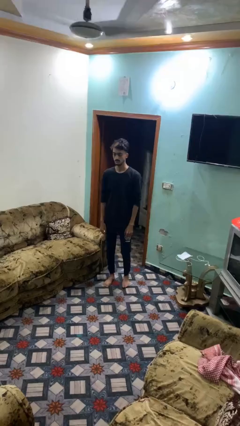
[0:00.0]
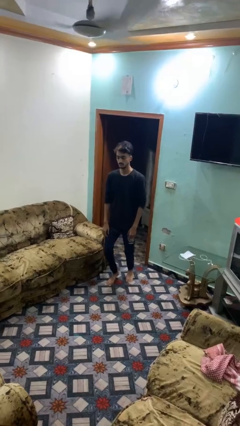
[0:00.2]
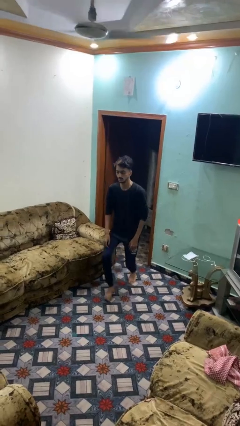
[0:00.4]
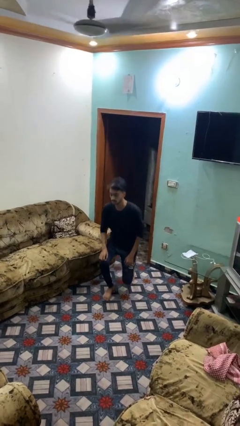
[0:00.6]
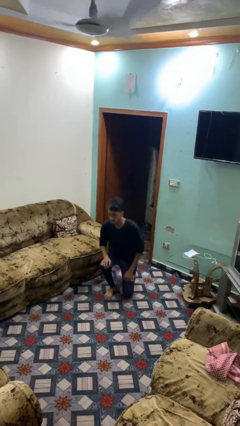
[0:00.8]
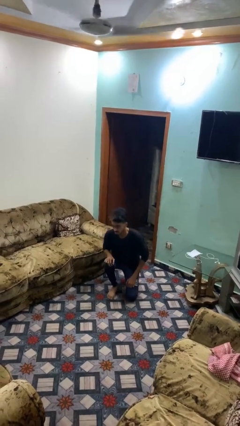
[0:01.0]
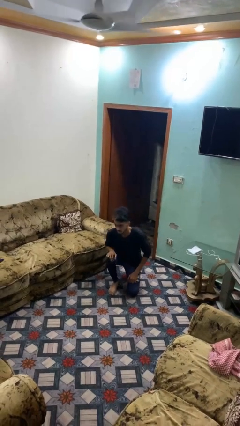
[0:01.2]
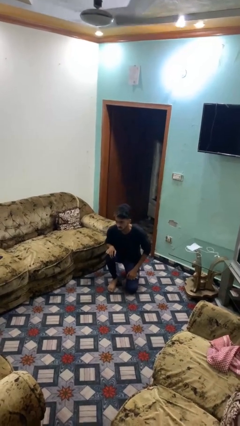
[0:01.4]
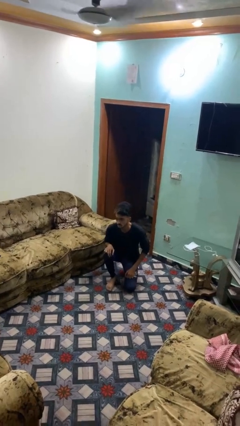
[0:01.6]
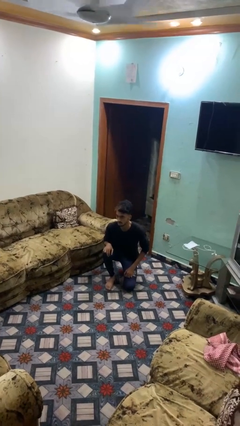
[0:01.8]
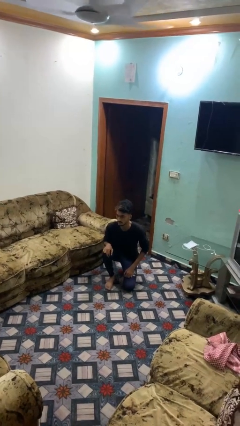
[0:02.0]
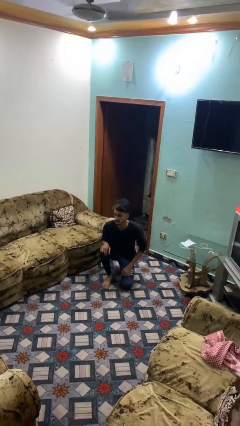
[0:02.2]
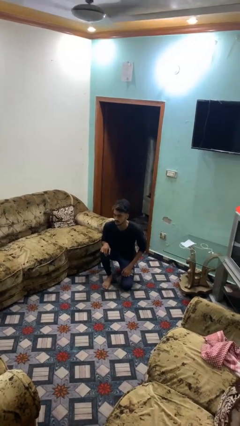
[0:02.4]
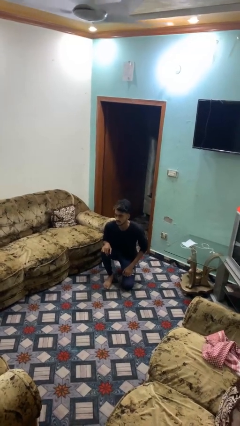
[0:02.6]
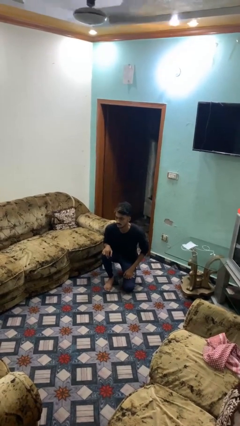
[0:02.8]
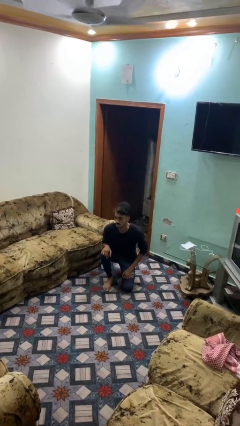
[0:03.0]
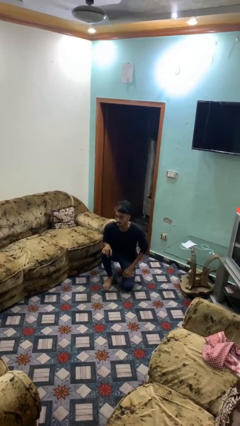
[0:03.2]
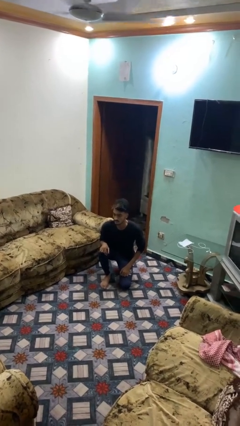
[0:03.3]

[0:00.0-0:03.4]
person kneels

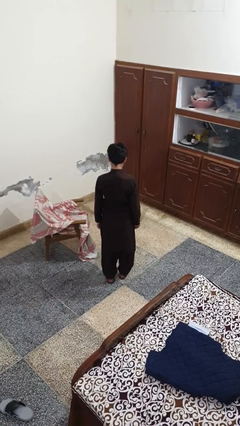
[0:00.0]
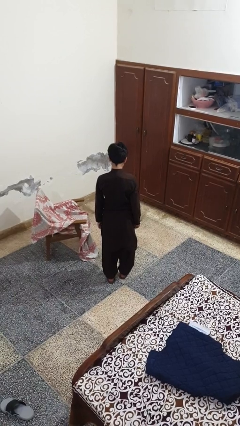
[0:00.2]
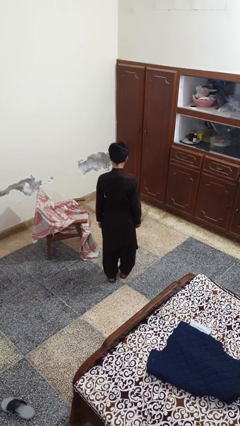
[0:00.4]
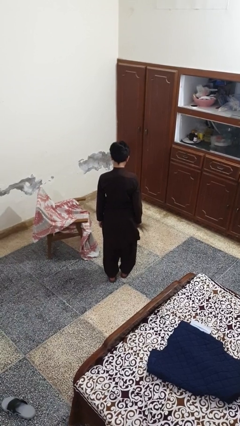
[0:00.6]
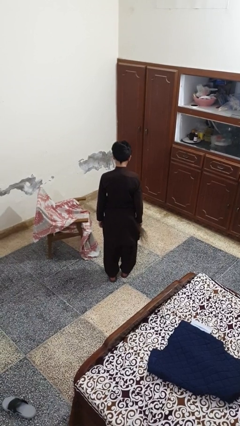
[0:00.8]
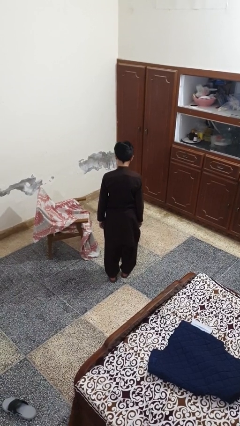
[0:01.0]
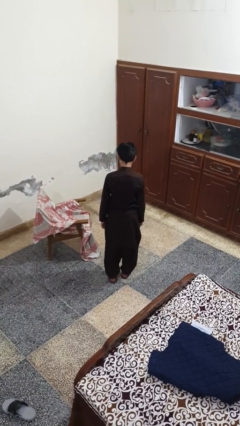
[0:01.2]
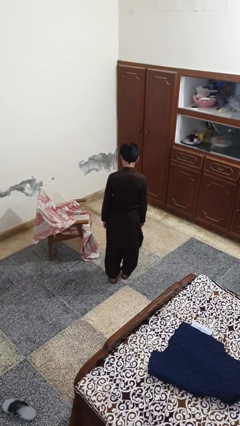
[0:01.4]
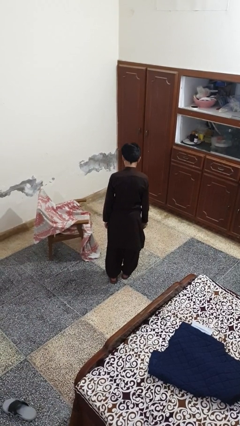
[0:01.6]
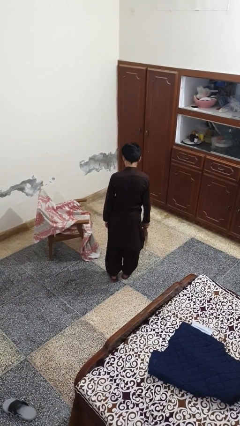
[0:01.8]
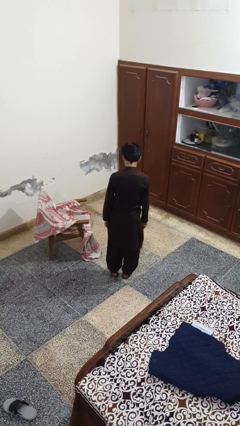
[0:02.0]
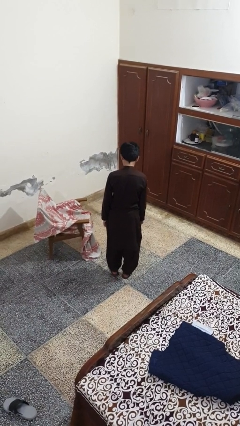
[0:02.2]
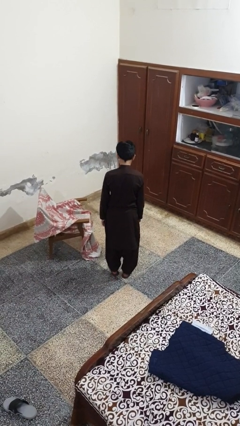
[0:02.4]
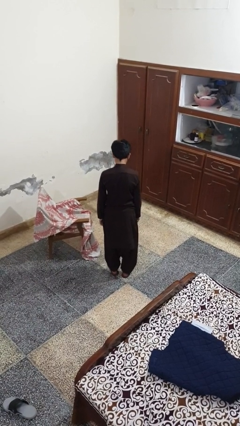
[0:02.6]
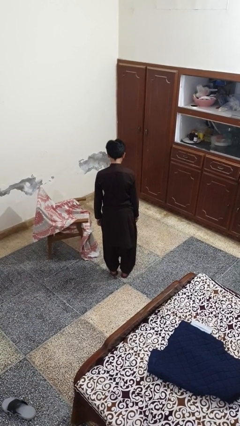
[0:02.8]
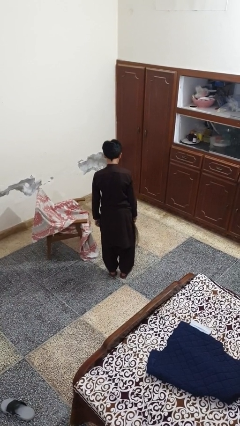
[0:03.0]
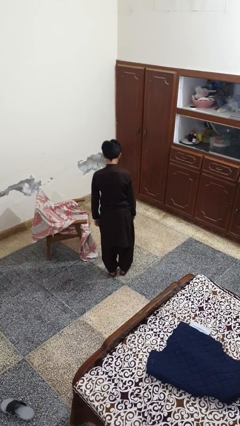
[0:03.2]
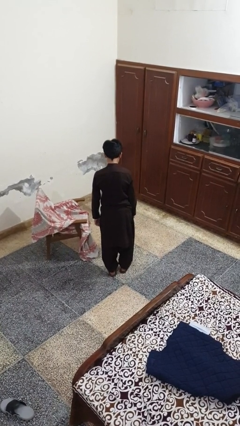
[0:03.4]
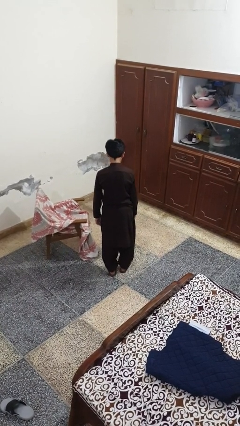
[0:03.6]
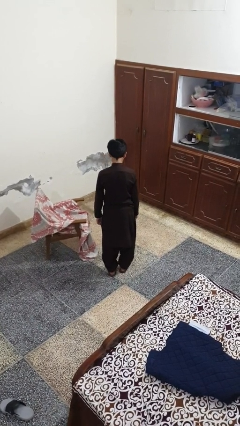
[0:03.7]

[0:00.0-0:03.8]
person sweeps floor

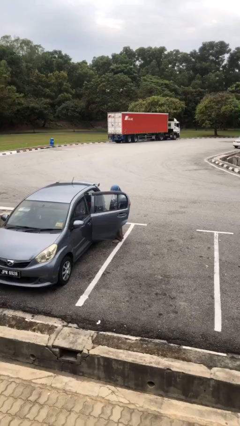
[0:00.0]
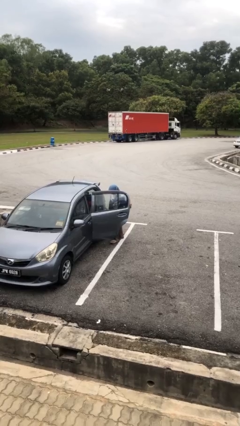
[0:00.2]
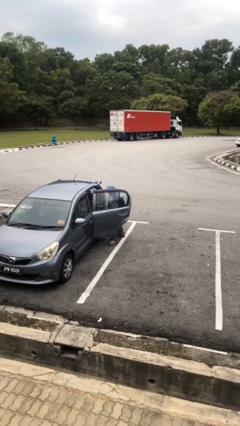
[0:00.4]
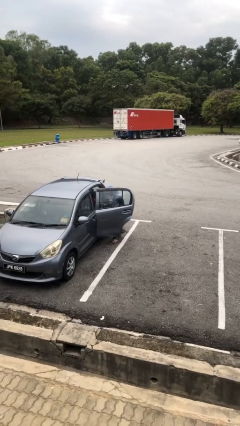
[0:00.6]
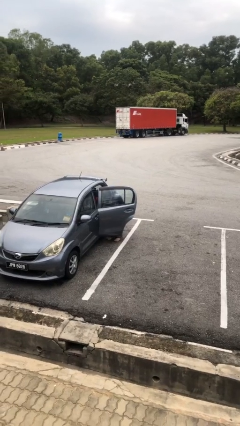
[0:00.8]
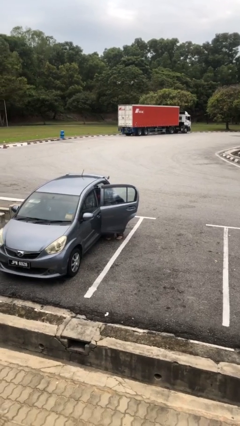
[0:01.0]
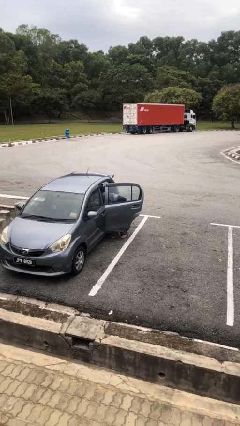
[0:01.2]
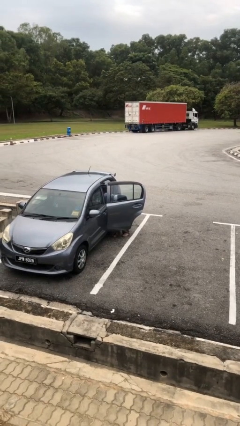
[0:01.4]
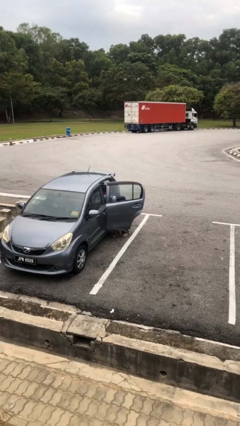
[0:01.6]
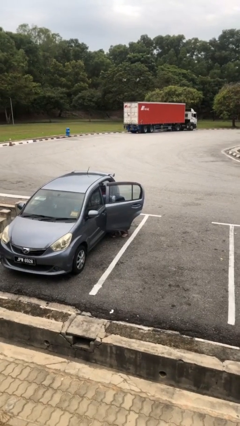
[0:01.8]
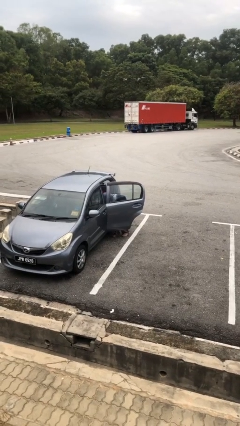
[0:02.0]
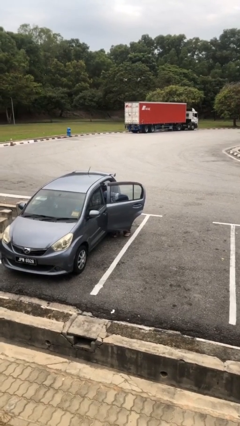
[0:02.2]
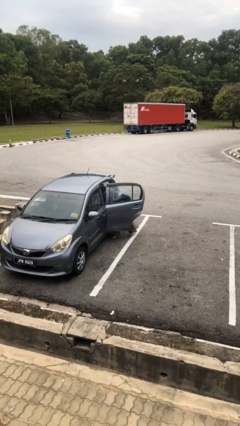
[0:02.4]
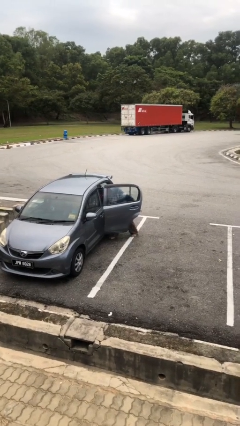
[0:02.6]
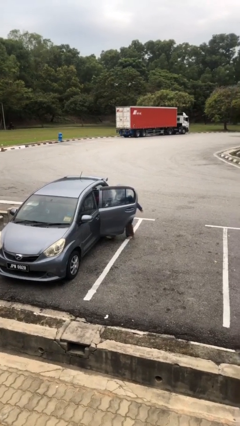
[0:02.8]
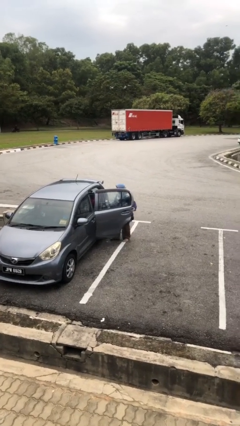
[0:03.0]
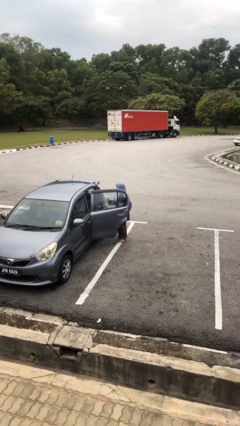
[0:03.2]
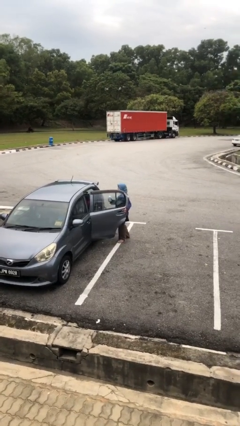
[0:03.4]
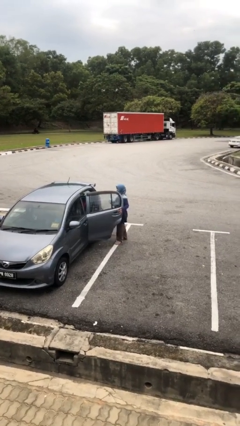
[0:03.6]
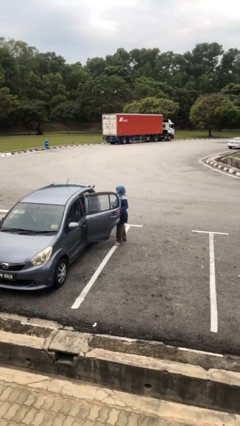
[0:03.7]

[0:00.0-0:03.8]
person unloads car

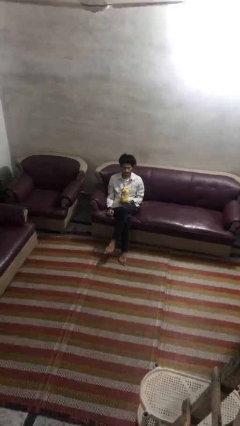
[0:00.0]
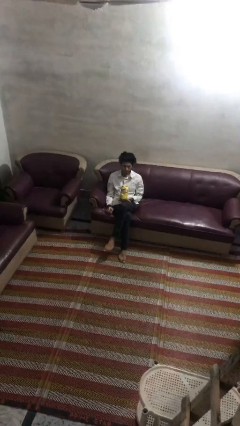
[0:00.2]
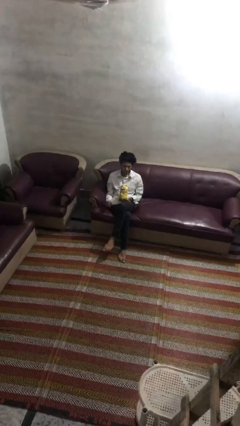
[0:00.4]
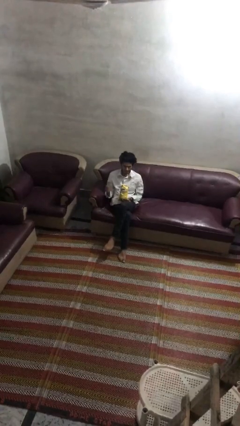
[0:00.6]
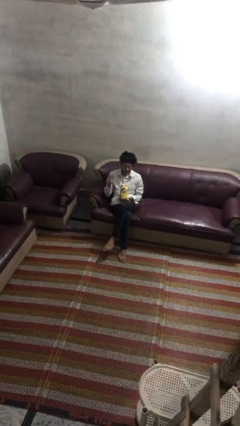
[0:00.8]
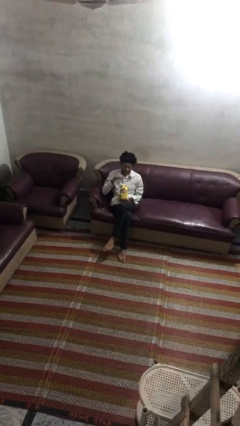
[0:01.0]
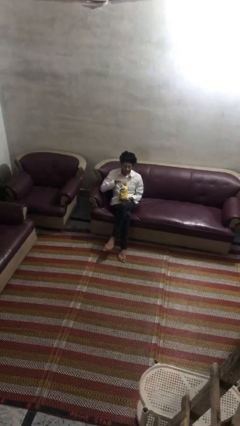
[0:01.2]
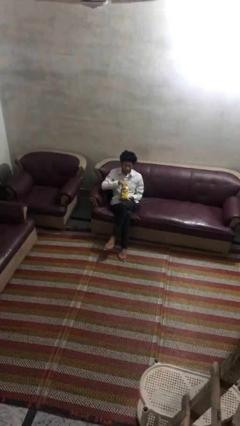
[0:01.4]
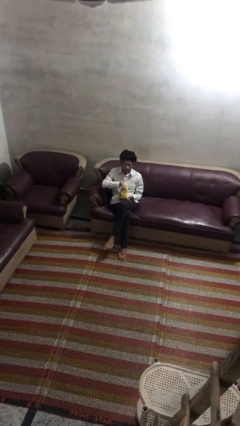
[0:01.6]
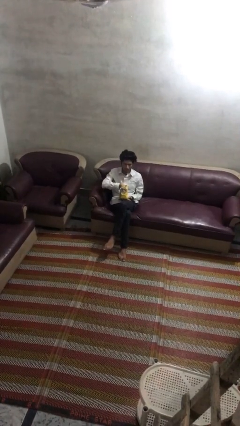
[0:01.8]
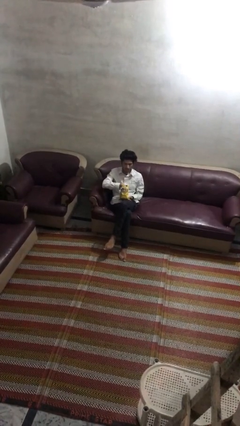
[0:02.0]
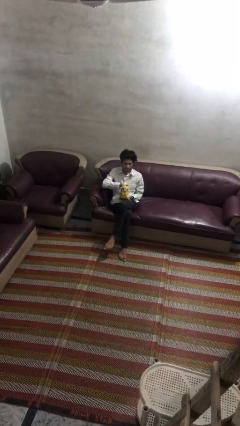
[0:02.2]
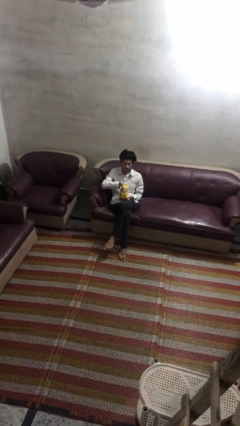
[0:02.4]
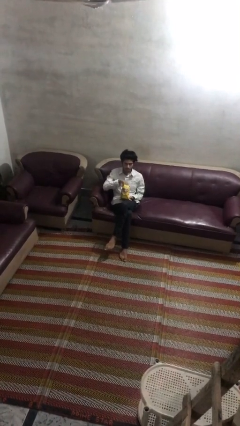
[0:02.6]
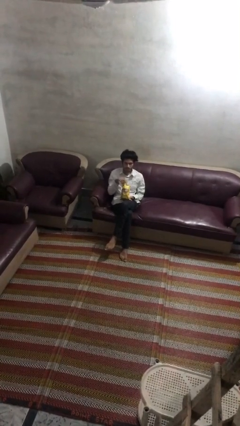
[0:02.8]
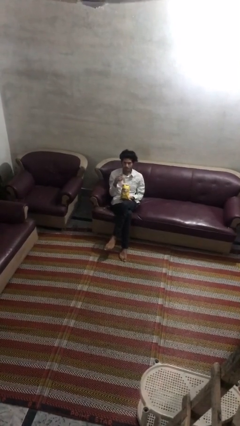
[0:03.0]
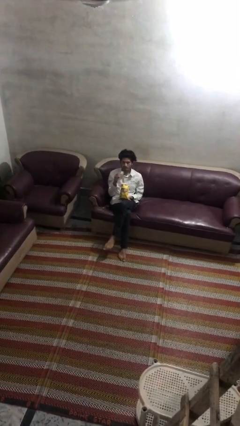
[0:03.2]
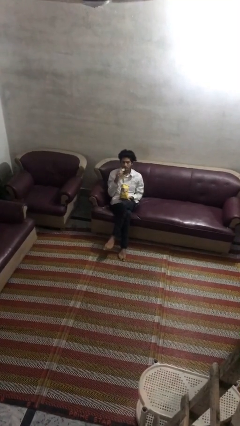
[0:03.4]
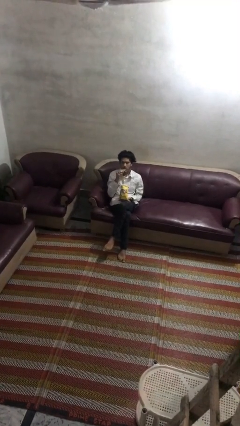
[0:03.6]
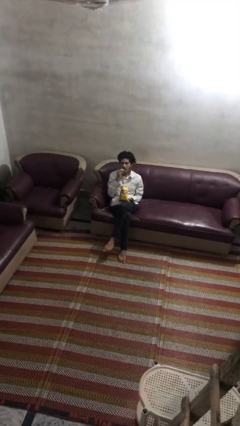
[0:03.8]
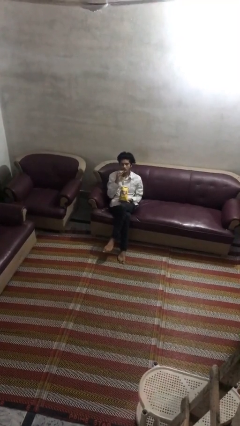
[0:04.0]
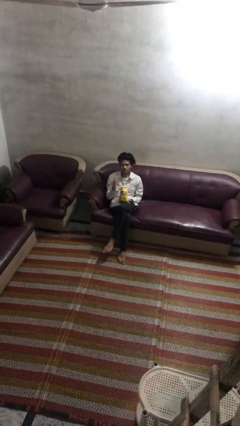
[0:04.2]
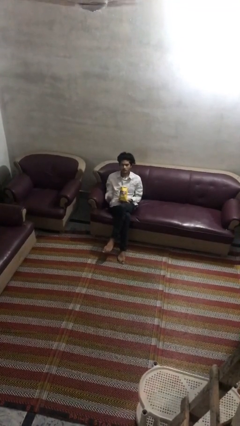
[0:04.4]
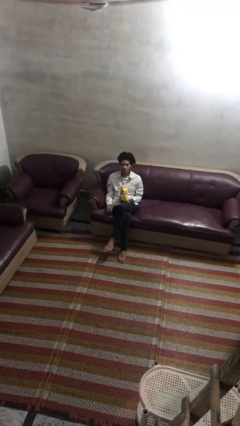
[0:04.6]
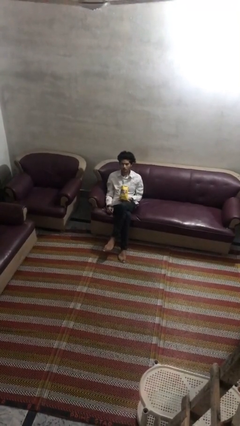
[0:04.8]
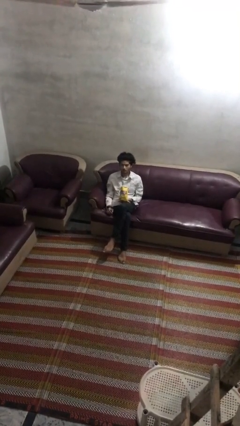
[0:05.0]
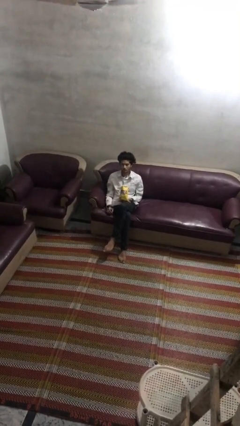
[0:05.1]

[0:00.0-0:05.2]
person eats snack from bag

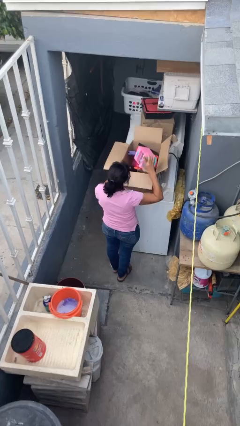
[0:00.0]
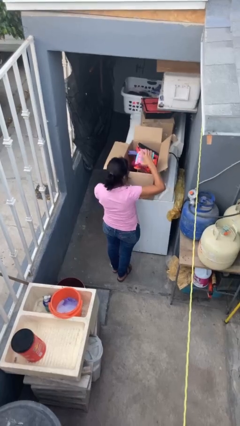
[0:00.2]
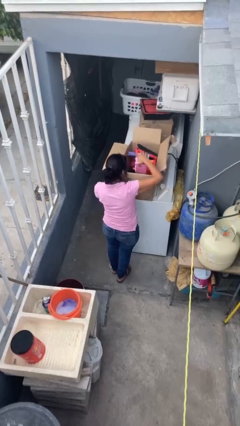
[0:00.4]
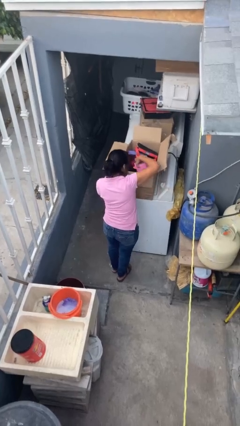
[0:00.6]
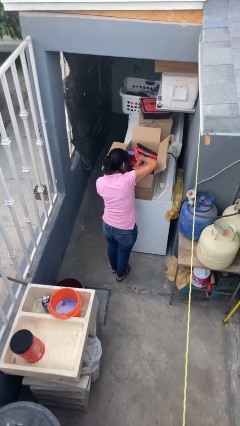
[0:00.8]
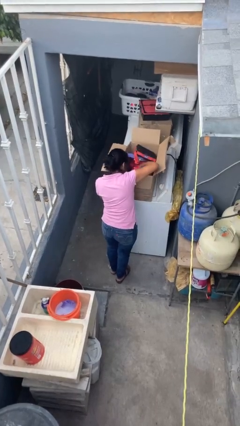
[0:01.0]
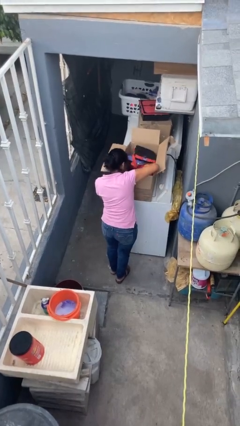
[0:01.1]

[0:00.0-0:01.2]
person puts object into box
